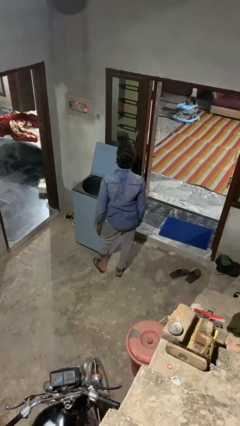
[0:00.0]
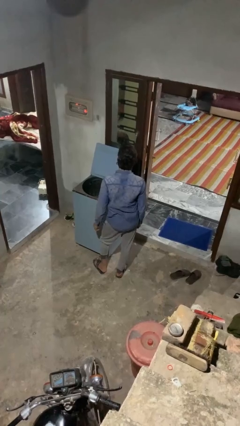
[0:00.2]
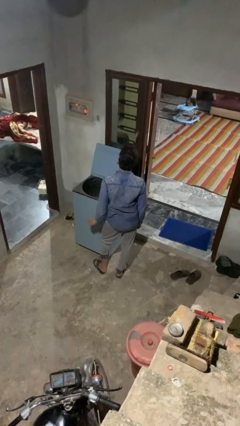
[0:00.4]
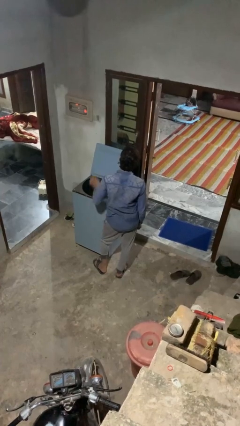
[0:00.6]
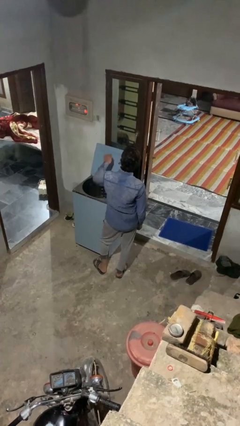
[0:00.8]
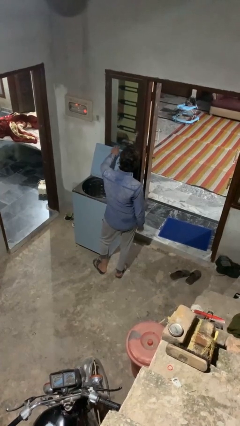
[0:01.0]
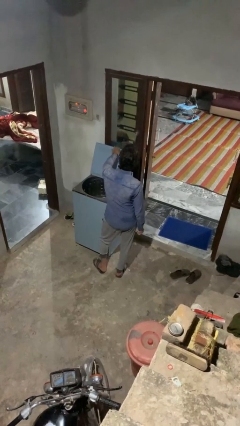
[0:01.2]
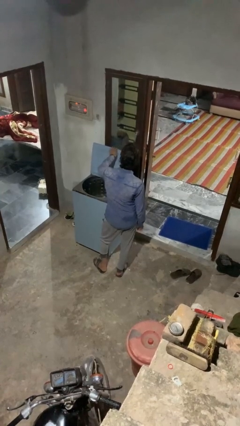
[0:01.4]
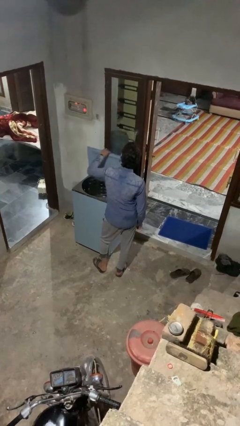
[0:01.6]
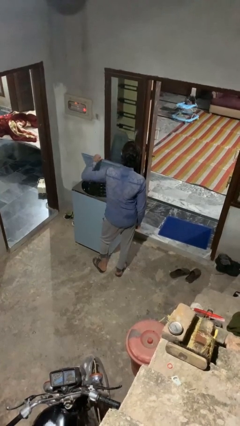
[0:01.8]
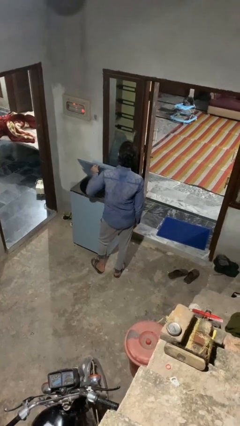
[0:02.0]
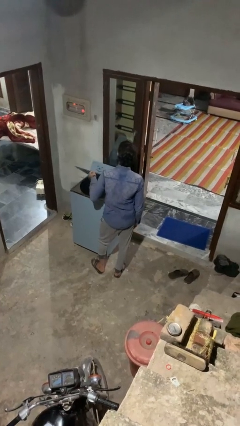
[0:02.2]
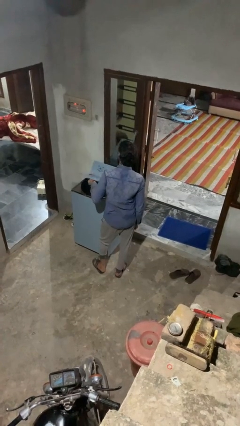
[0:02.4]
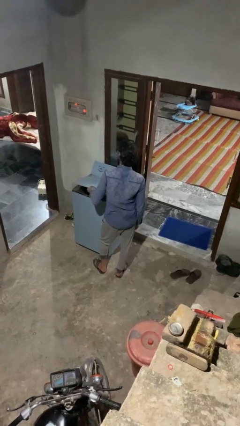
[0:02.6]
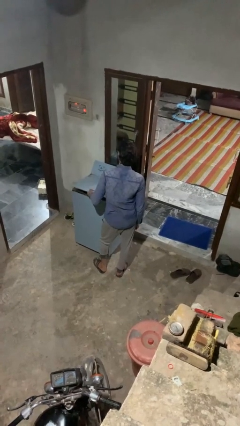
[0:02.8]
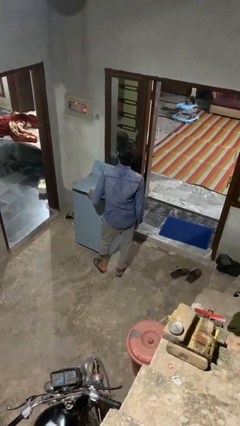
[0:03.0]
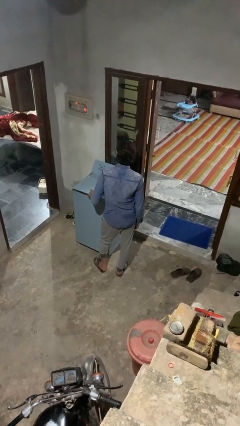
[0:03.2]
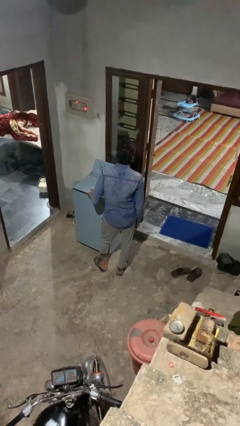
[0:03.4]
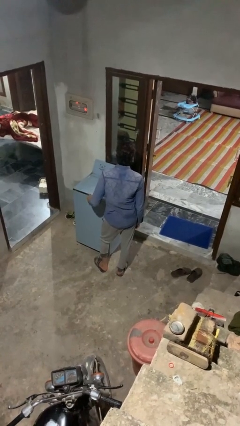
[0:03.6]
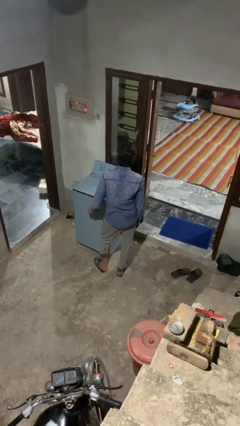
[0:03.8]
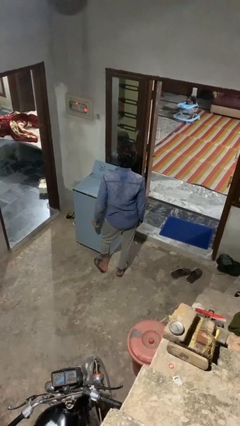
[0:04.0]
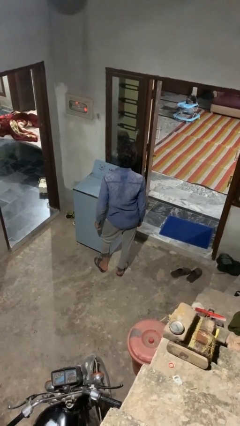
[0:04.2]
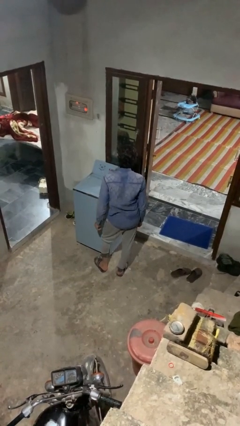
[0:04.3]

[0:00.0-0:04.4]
person closes clothes washer

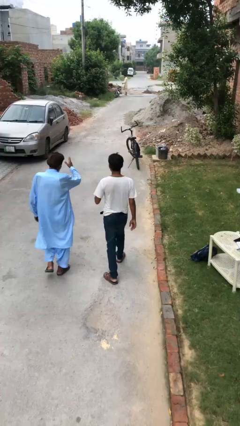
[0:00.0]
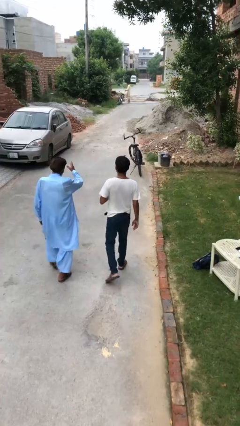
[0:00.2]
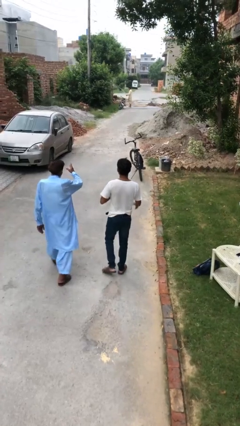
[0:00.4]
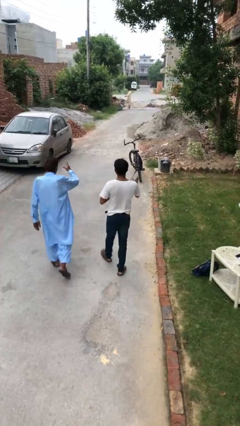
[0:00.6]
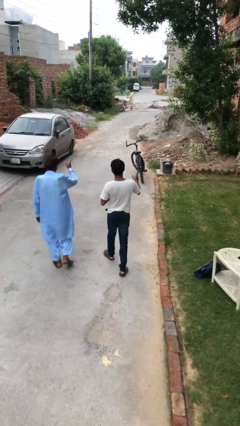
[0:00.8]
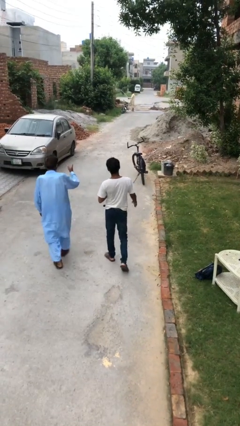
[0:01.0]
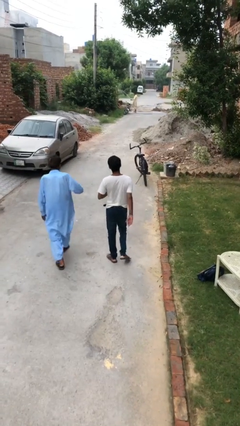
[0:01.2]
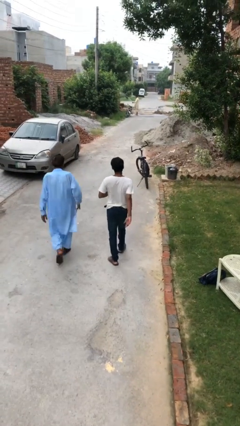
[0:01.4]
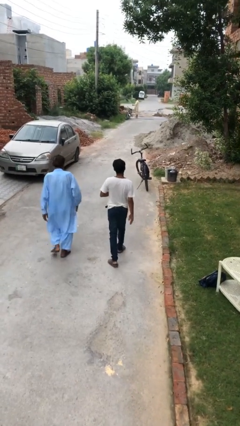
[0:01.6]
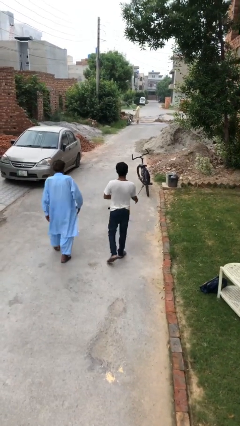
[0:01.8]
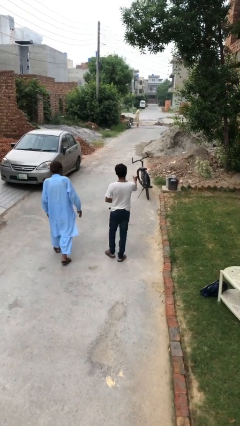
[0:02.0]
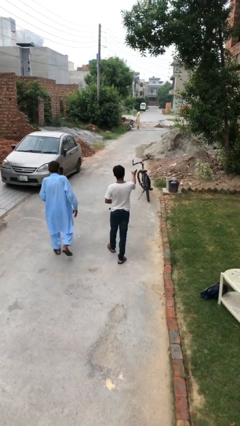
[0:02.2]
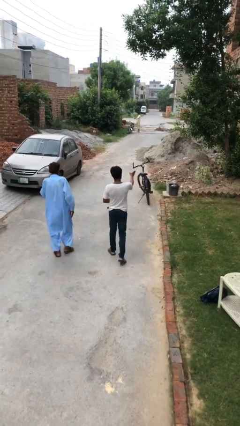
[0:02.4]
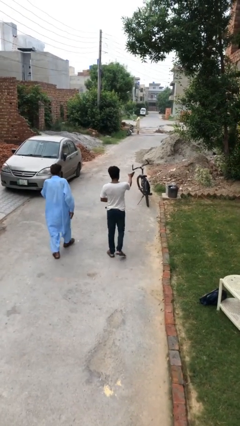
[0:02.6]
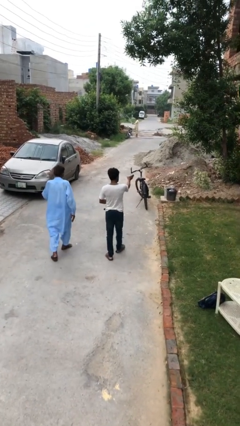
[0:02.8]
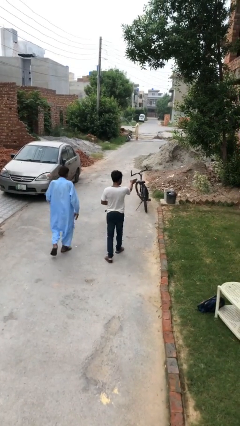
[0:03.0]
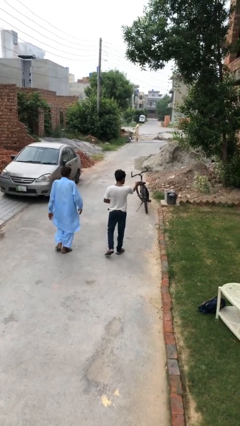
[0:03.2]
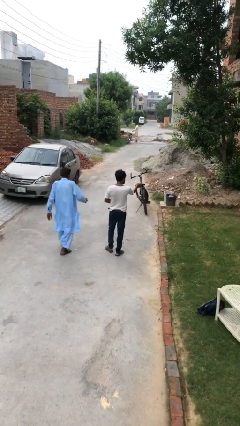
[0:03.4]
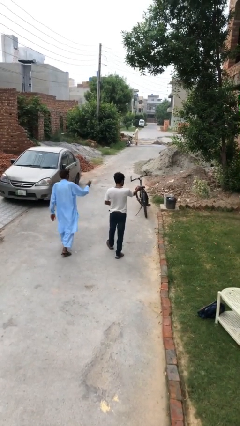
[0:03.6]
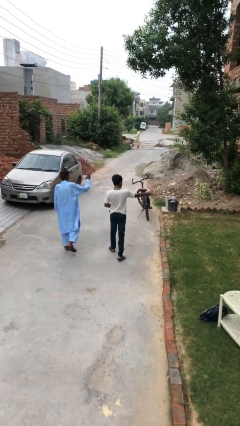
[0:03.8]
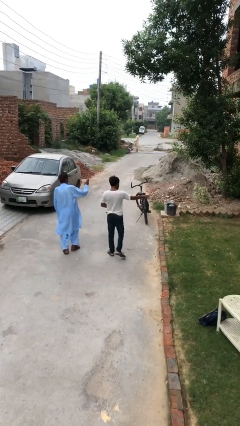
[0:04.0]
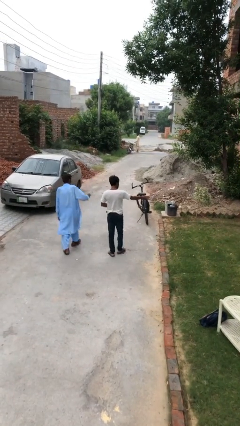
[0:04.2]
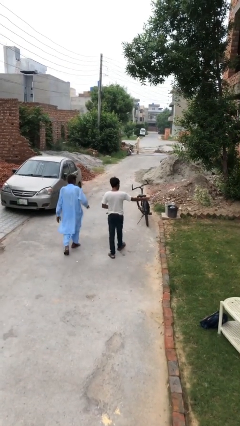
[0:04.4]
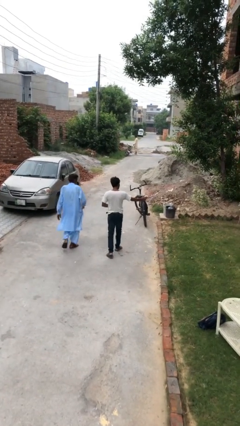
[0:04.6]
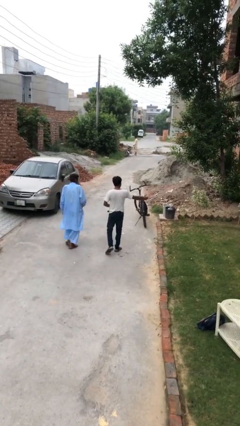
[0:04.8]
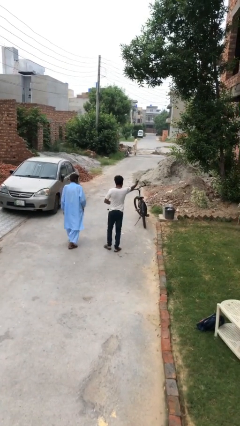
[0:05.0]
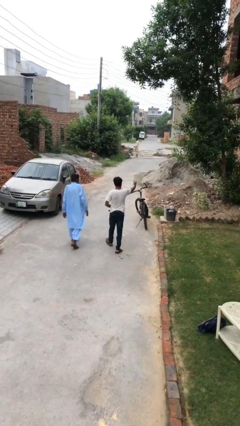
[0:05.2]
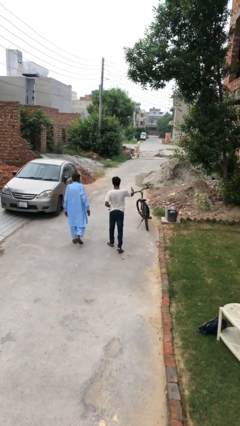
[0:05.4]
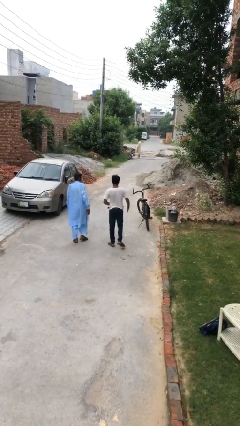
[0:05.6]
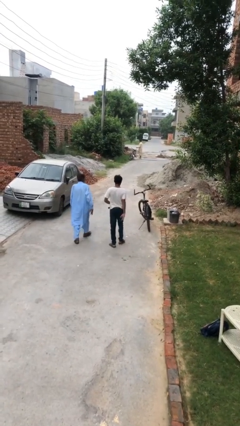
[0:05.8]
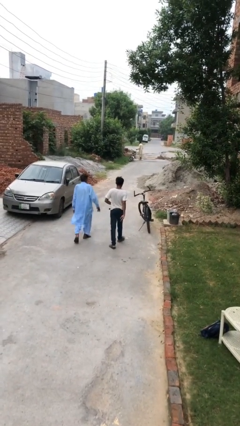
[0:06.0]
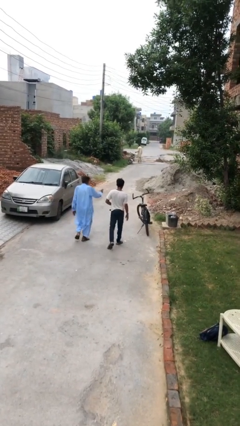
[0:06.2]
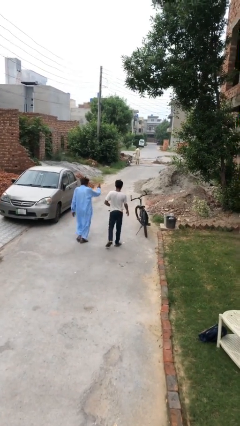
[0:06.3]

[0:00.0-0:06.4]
person talks to person

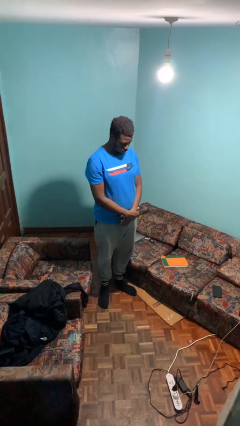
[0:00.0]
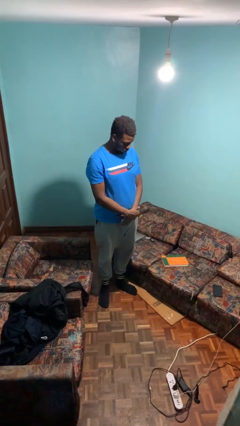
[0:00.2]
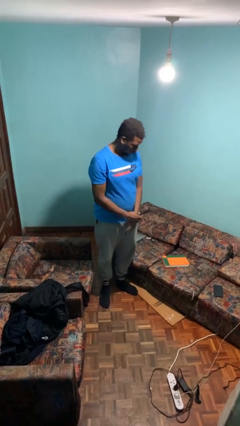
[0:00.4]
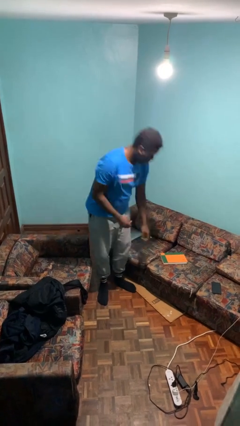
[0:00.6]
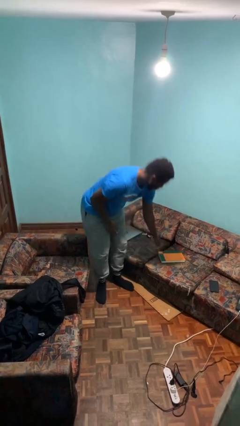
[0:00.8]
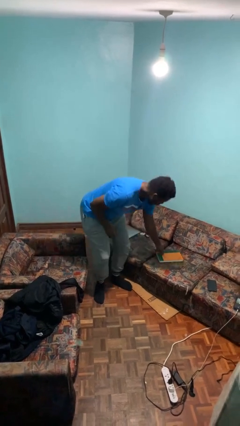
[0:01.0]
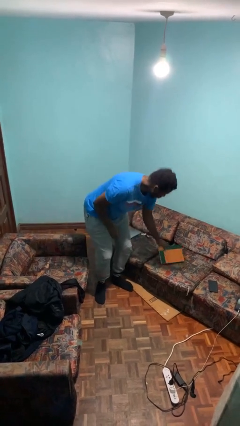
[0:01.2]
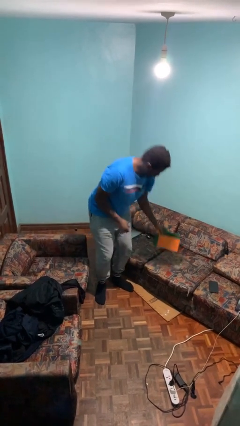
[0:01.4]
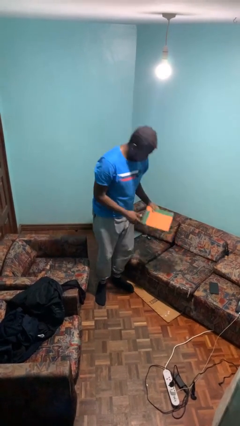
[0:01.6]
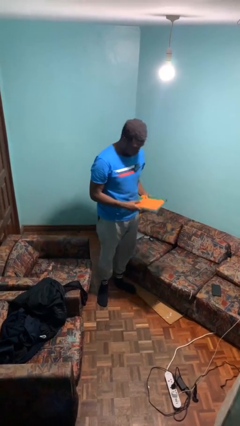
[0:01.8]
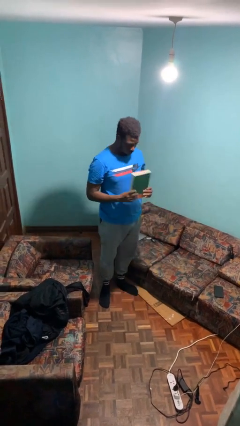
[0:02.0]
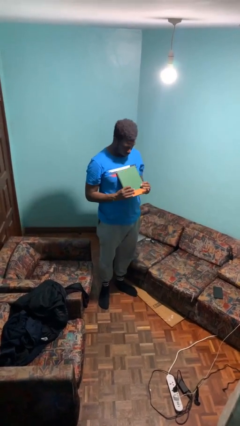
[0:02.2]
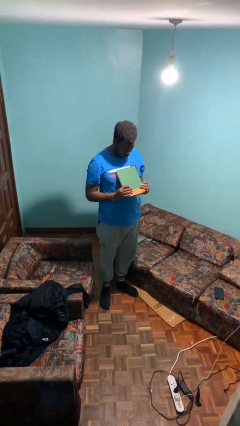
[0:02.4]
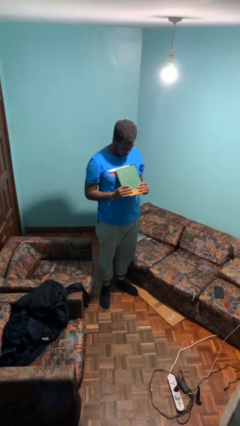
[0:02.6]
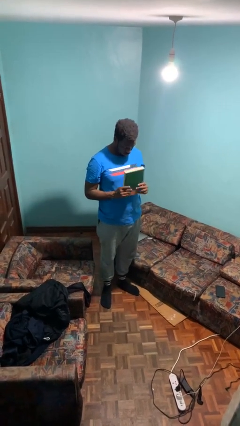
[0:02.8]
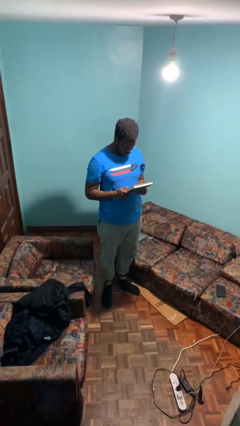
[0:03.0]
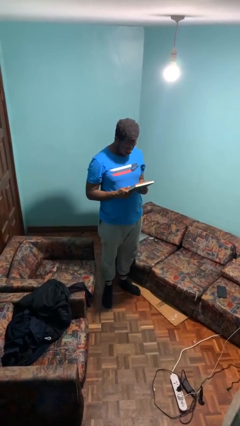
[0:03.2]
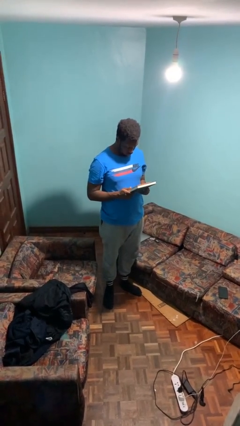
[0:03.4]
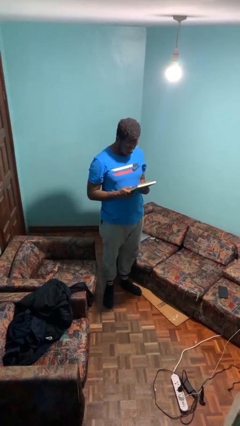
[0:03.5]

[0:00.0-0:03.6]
person picks up object from couch

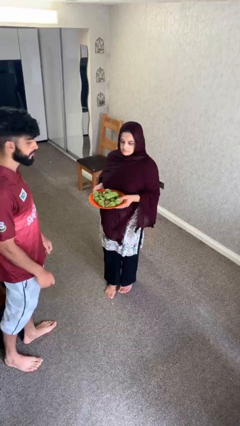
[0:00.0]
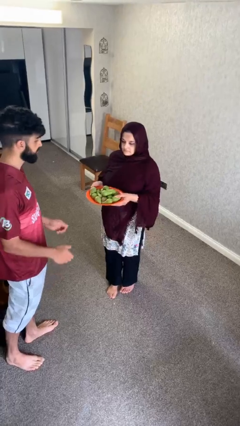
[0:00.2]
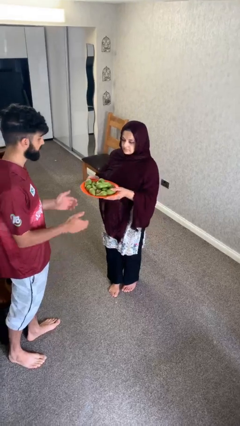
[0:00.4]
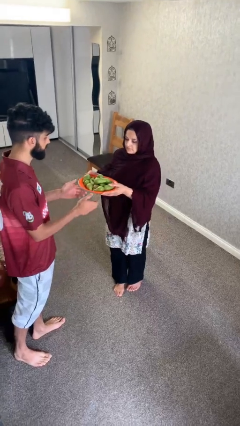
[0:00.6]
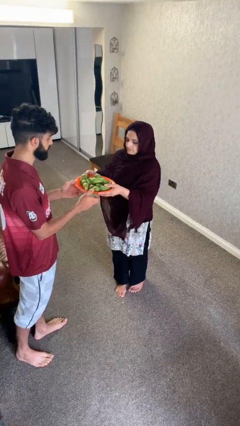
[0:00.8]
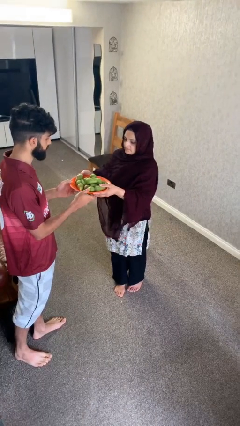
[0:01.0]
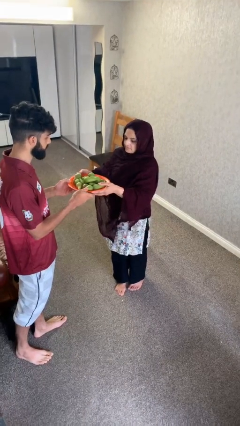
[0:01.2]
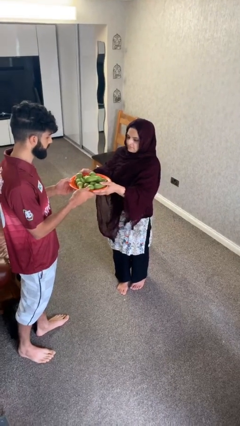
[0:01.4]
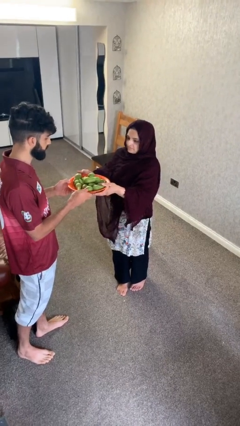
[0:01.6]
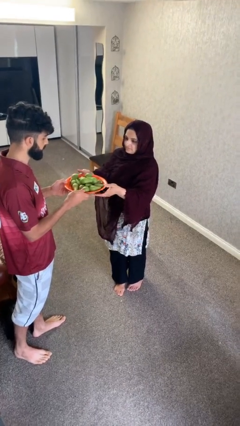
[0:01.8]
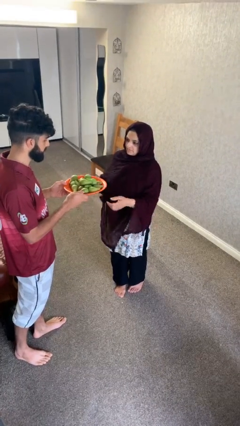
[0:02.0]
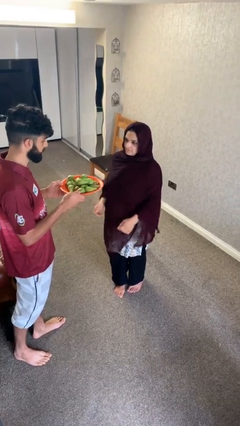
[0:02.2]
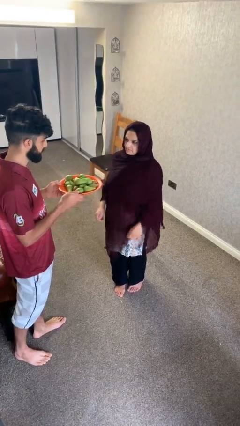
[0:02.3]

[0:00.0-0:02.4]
person transfers object to person

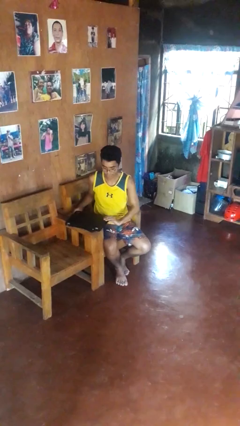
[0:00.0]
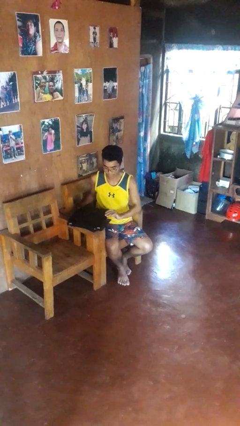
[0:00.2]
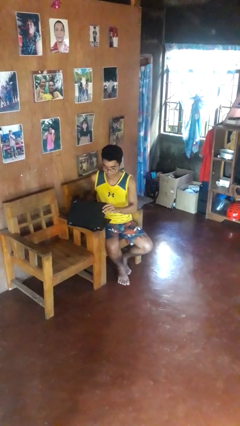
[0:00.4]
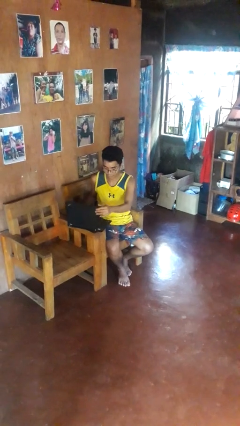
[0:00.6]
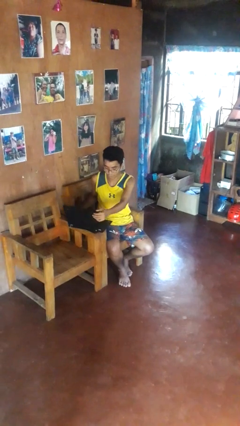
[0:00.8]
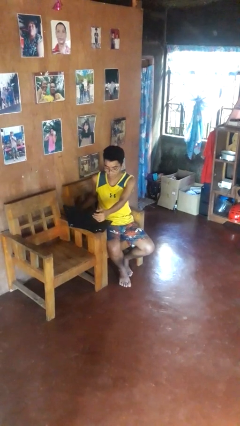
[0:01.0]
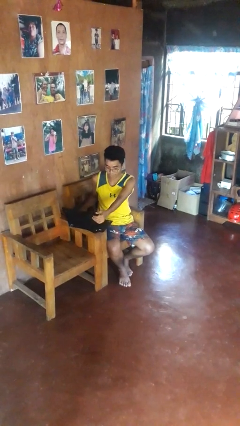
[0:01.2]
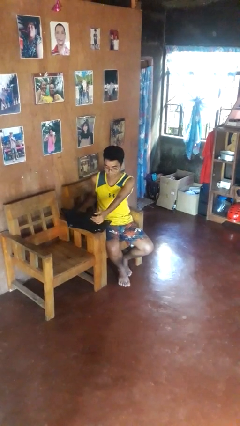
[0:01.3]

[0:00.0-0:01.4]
person opens laptop
